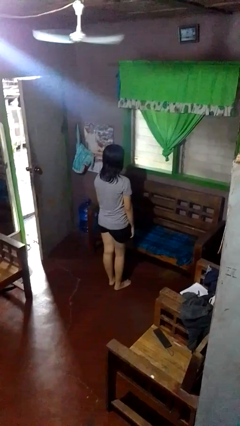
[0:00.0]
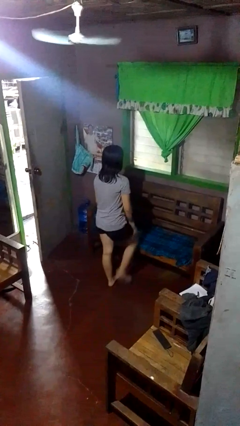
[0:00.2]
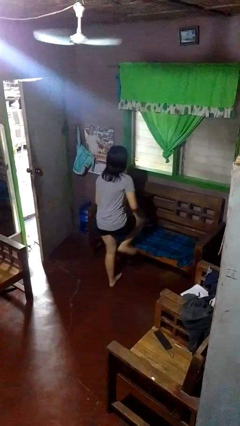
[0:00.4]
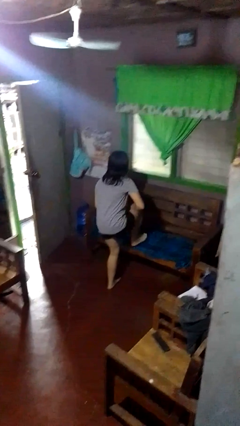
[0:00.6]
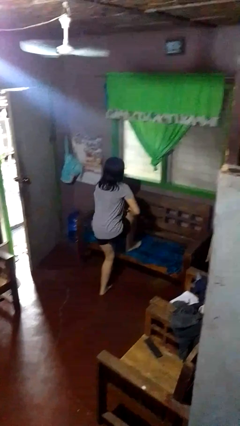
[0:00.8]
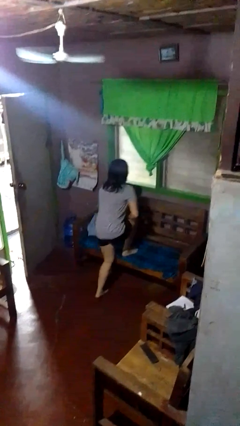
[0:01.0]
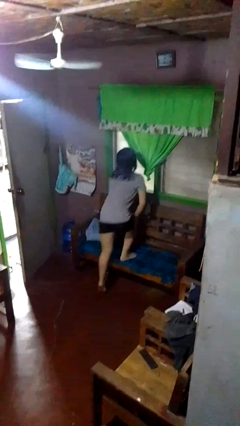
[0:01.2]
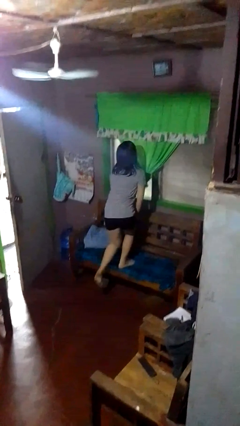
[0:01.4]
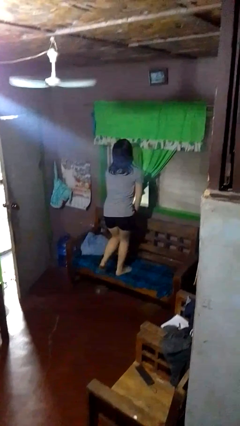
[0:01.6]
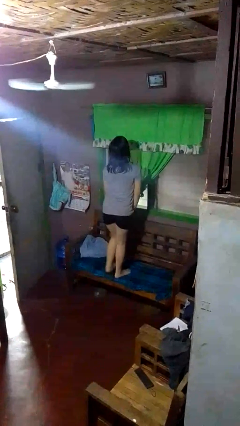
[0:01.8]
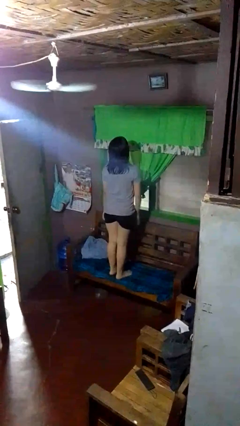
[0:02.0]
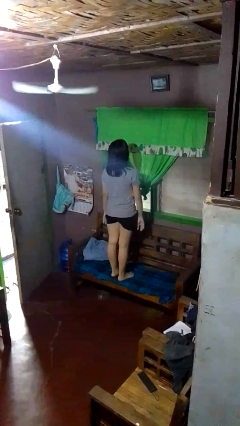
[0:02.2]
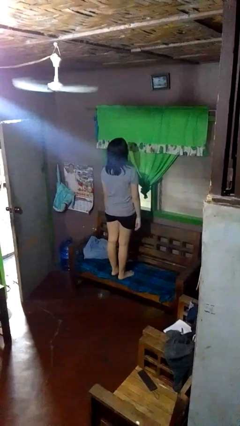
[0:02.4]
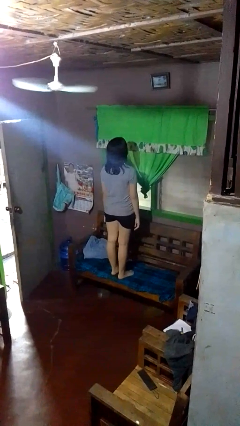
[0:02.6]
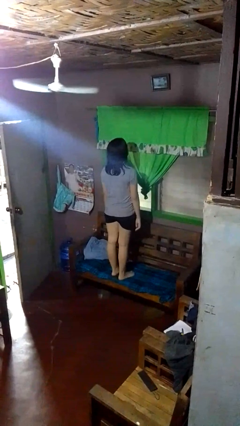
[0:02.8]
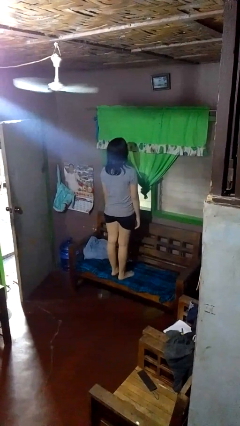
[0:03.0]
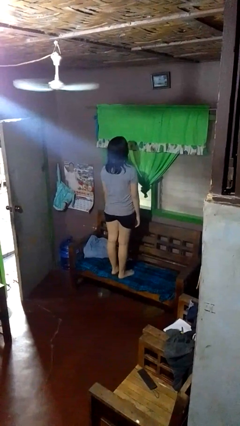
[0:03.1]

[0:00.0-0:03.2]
person climbs on couch

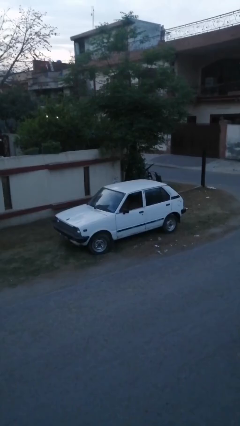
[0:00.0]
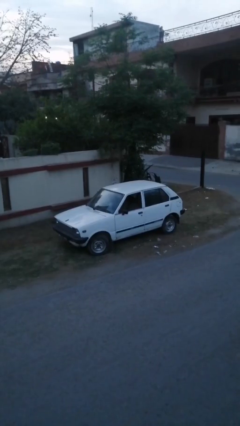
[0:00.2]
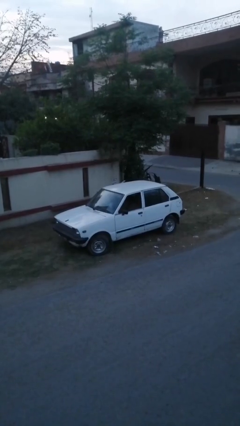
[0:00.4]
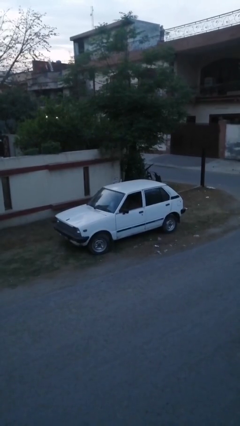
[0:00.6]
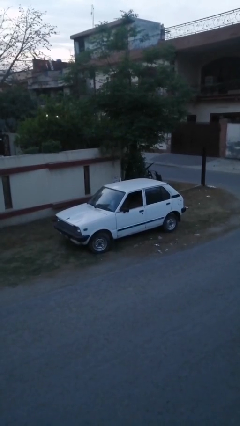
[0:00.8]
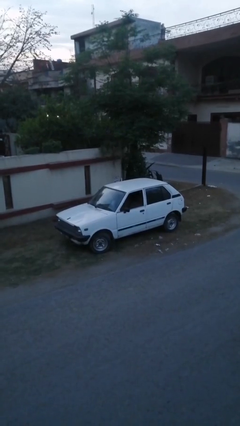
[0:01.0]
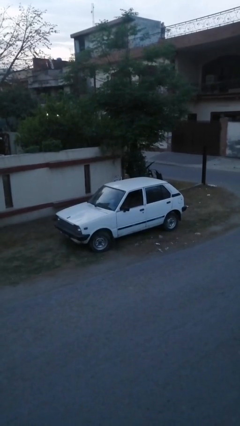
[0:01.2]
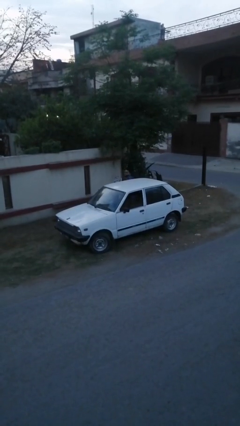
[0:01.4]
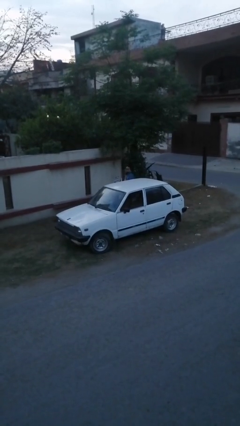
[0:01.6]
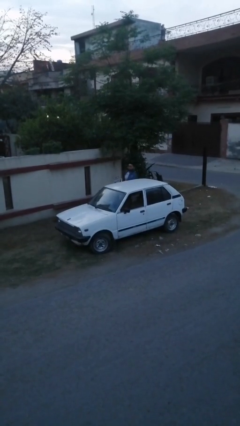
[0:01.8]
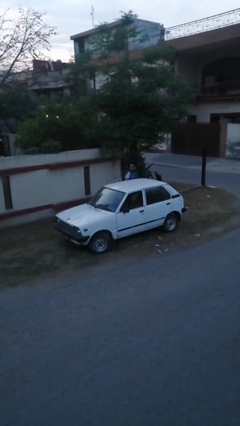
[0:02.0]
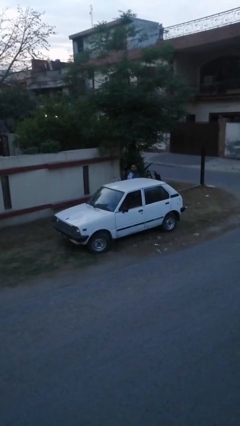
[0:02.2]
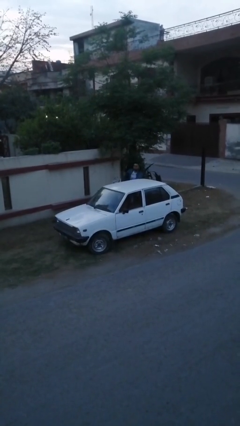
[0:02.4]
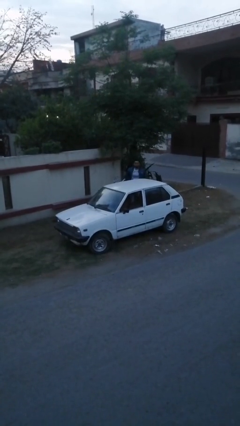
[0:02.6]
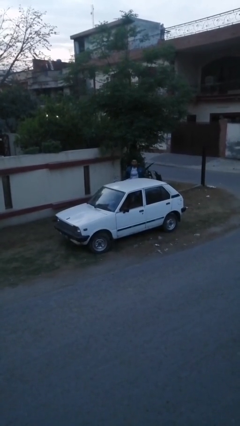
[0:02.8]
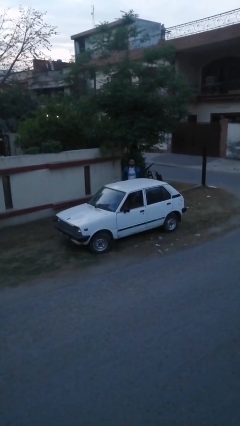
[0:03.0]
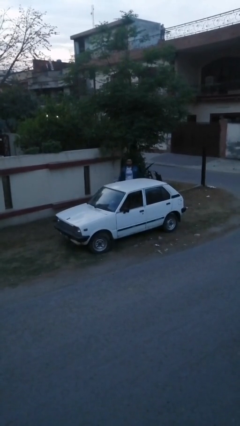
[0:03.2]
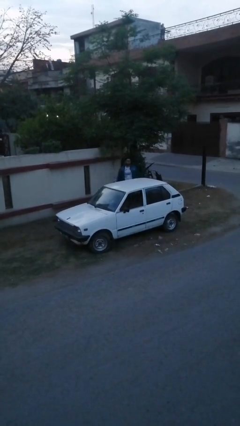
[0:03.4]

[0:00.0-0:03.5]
car drops off person

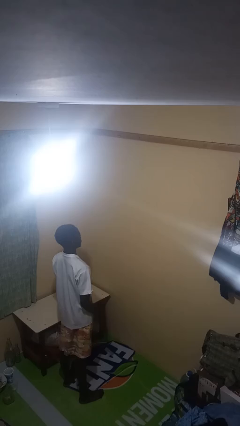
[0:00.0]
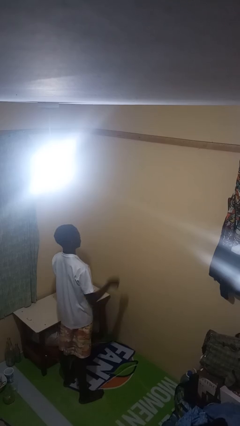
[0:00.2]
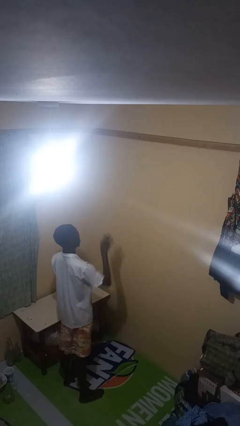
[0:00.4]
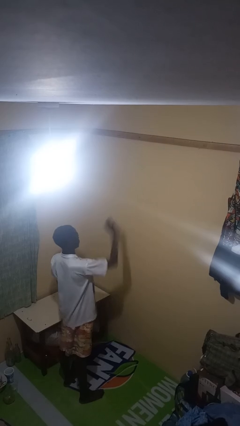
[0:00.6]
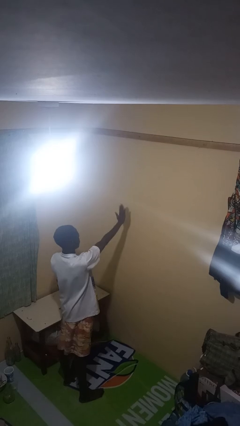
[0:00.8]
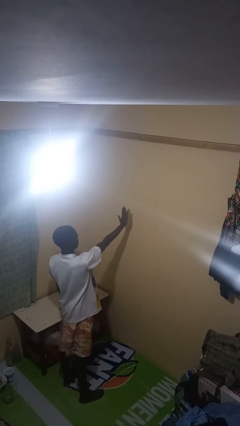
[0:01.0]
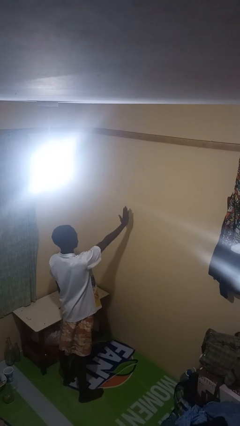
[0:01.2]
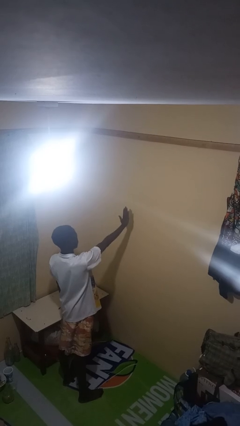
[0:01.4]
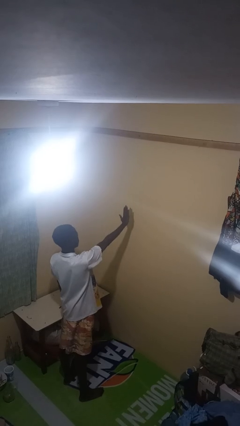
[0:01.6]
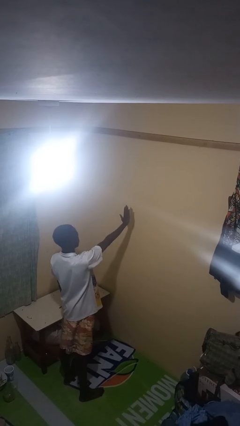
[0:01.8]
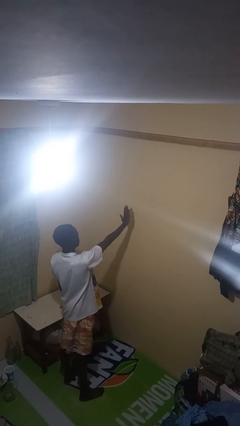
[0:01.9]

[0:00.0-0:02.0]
person gestures stop

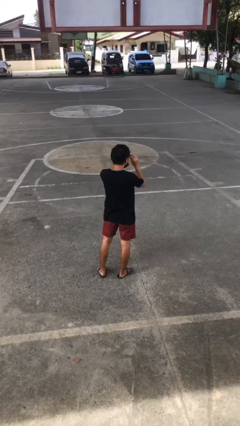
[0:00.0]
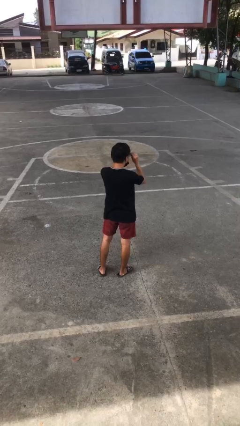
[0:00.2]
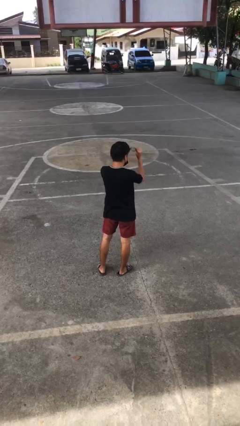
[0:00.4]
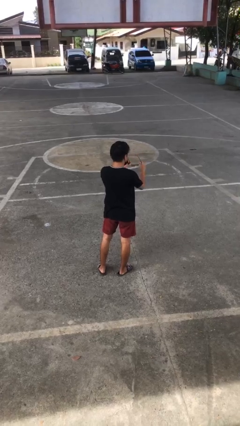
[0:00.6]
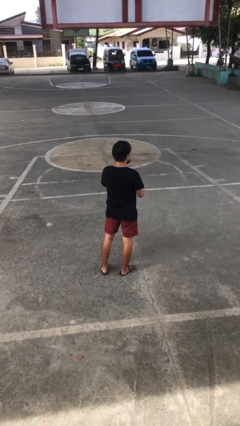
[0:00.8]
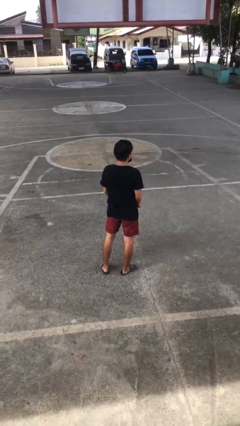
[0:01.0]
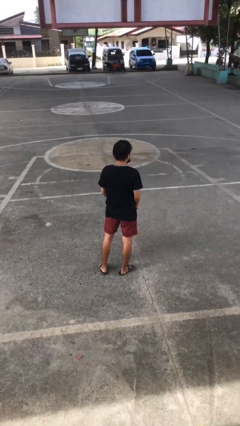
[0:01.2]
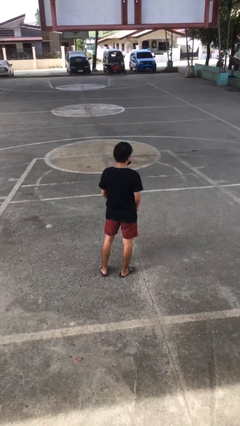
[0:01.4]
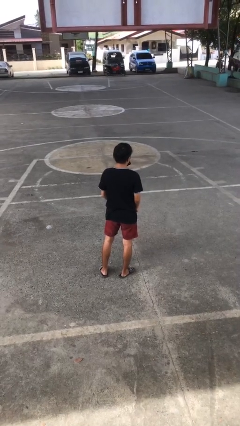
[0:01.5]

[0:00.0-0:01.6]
person takes off glasses

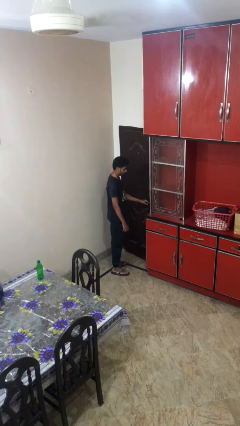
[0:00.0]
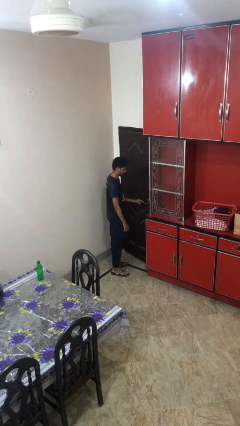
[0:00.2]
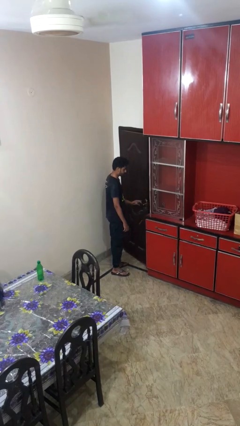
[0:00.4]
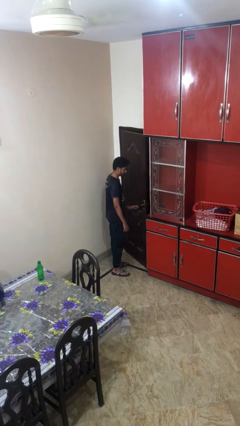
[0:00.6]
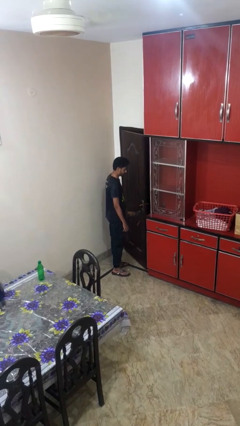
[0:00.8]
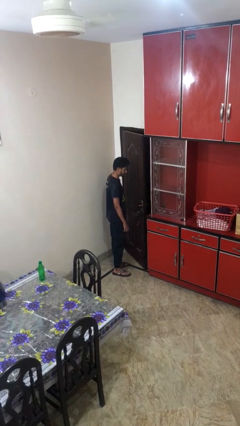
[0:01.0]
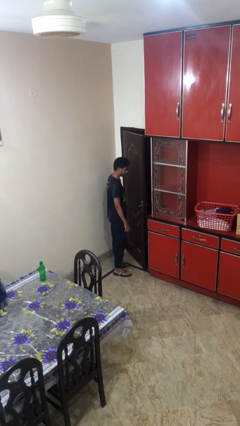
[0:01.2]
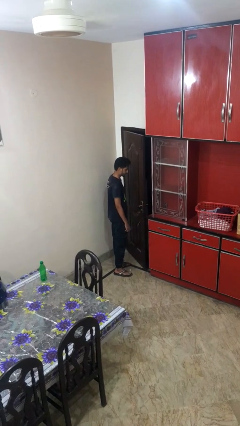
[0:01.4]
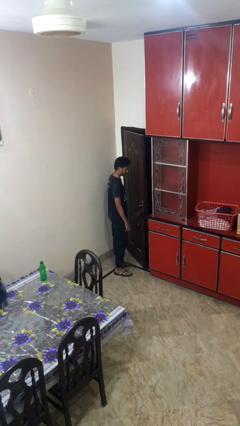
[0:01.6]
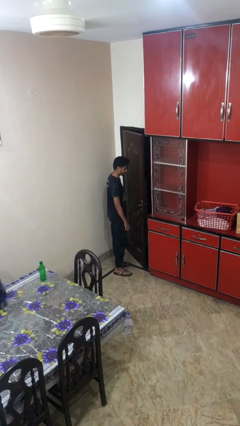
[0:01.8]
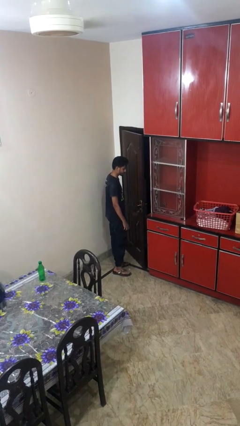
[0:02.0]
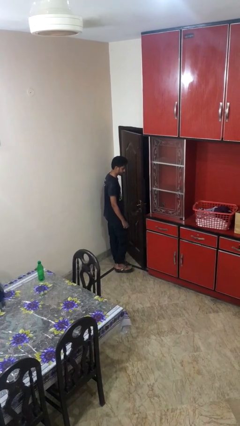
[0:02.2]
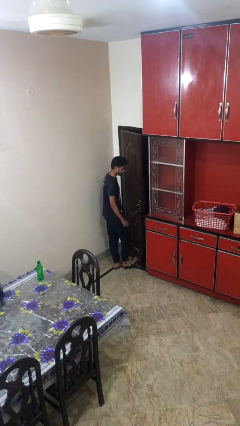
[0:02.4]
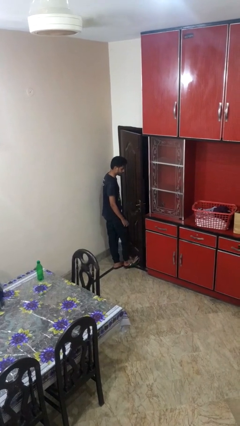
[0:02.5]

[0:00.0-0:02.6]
person opens facility door

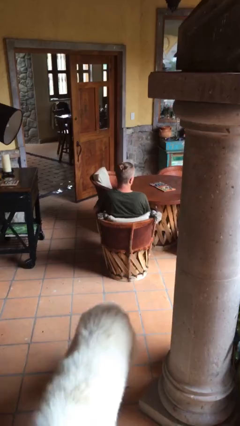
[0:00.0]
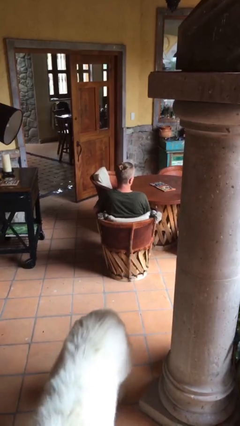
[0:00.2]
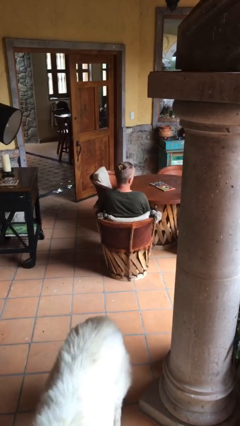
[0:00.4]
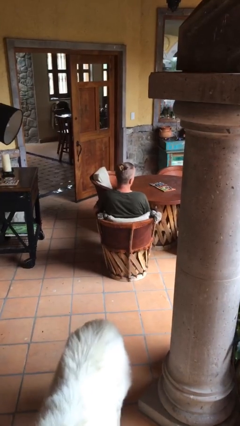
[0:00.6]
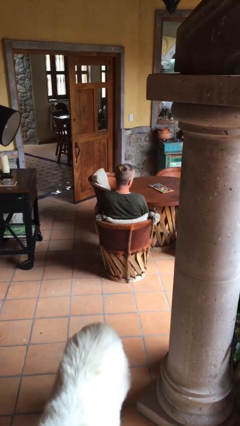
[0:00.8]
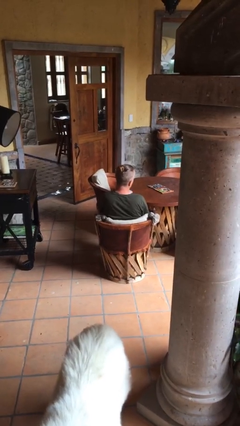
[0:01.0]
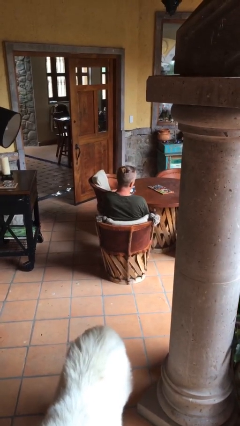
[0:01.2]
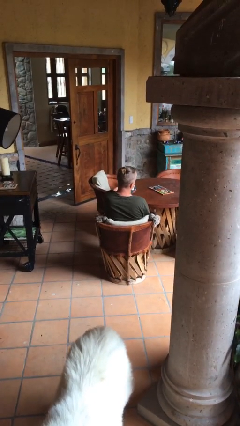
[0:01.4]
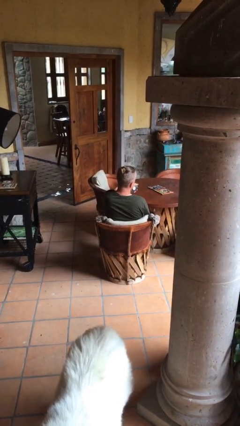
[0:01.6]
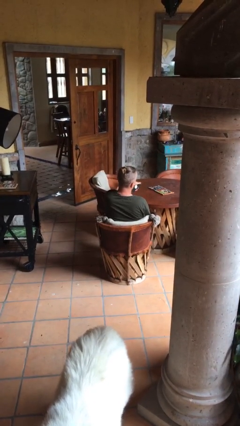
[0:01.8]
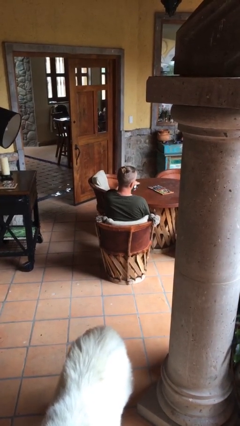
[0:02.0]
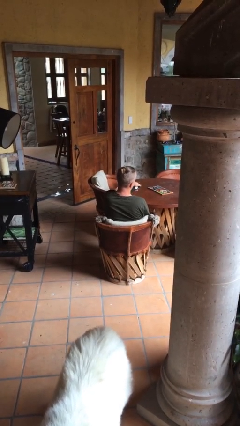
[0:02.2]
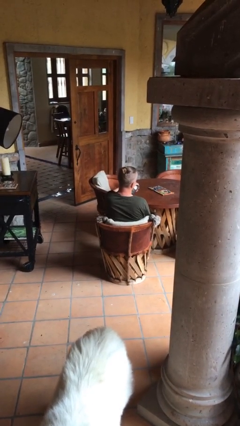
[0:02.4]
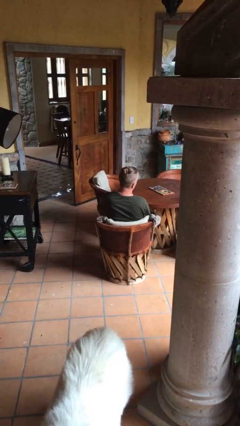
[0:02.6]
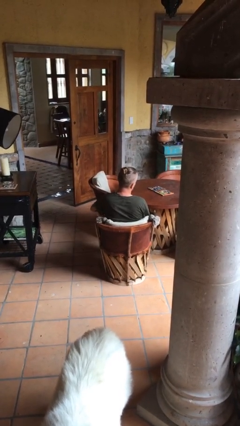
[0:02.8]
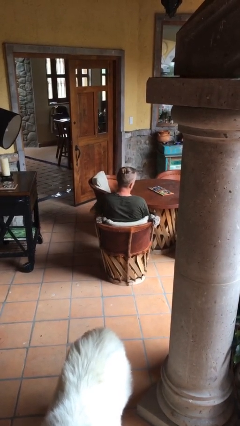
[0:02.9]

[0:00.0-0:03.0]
person uses television remote

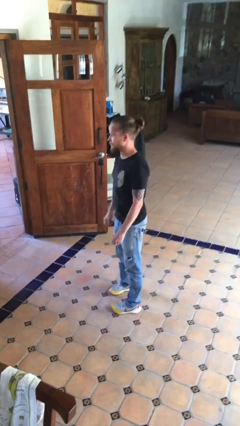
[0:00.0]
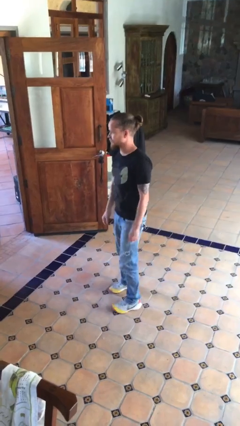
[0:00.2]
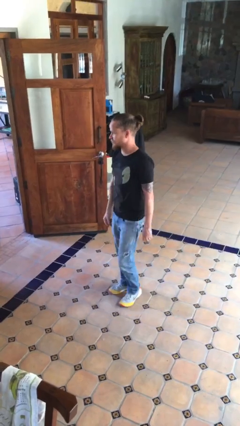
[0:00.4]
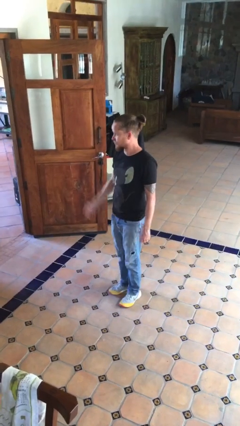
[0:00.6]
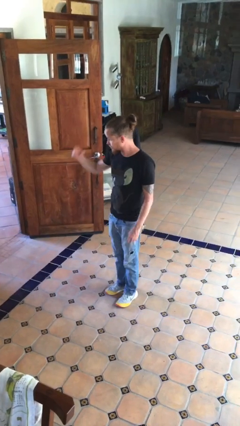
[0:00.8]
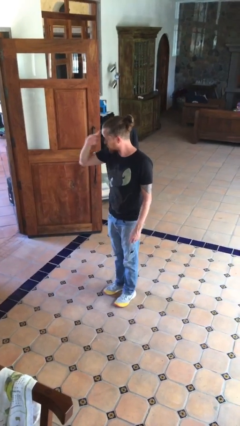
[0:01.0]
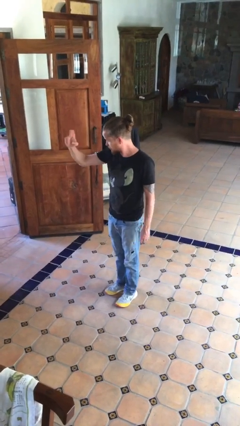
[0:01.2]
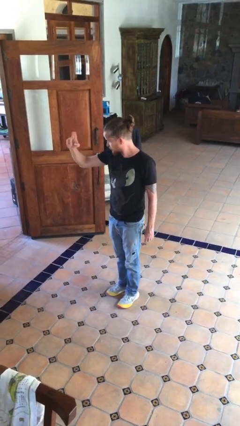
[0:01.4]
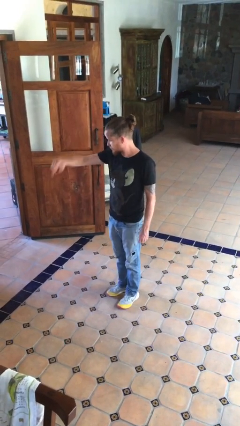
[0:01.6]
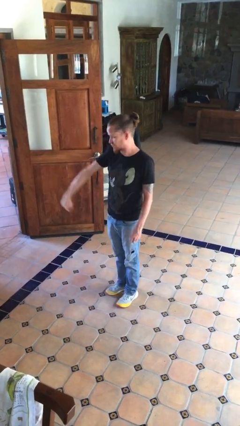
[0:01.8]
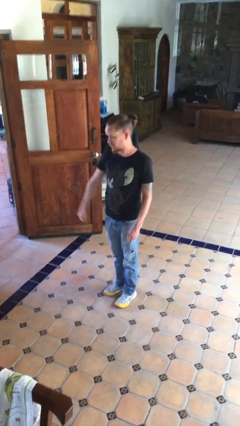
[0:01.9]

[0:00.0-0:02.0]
person salutes
